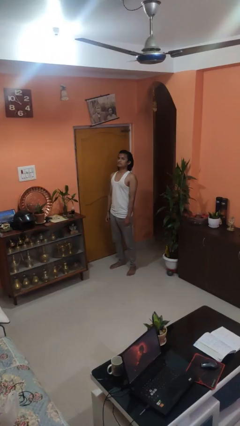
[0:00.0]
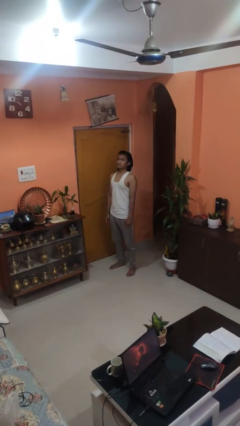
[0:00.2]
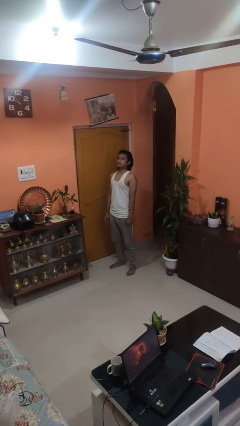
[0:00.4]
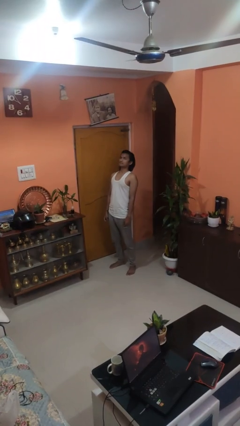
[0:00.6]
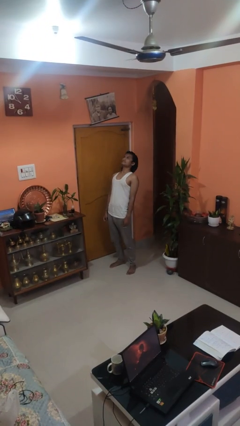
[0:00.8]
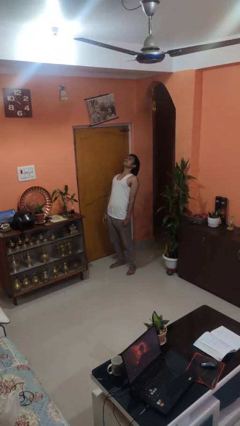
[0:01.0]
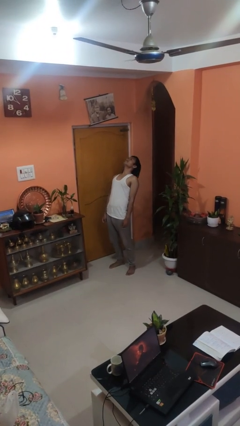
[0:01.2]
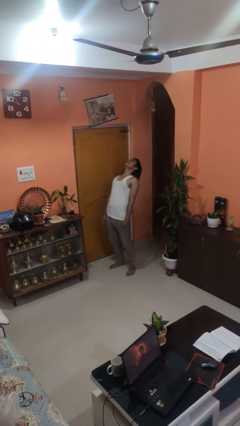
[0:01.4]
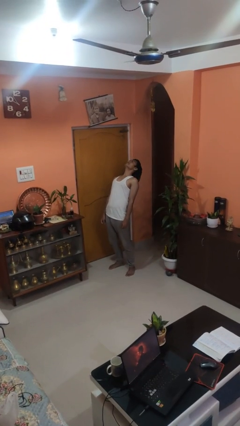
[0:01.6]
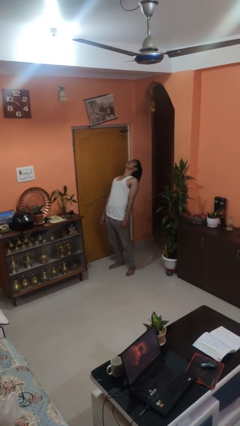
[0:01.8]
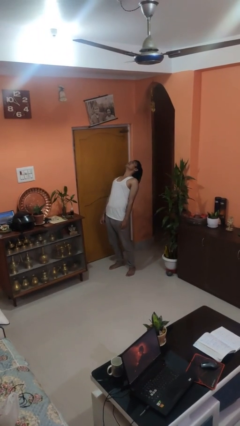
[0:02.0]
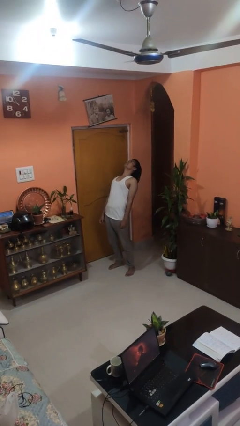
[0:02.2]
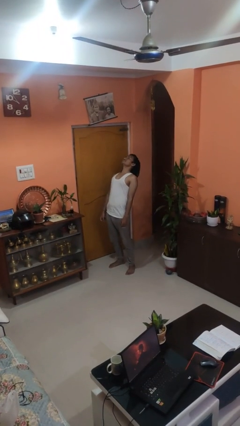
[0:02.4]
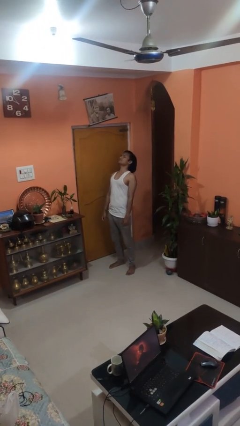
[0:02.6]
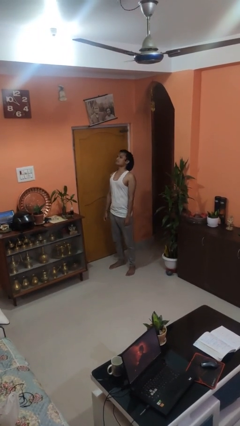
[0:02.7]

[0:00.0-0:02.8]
person stretches back

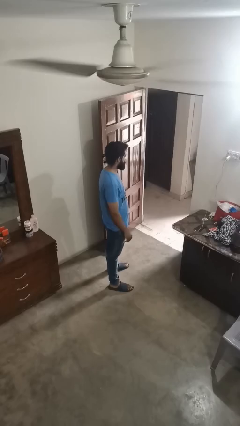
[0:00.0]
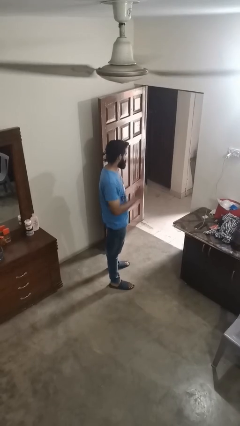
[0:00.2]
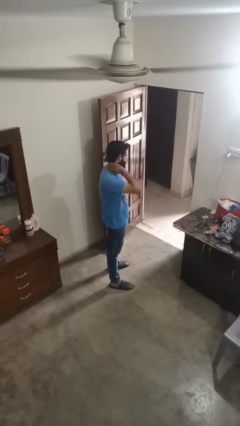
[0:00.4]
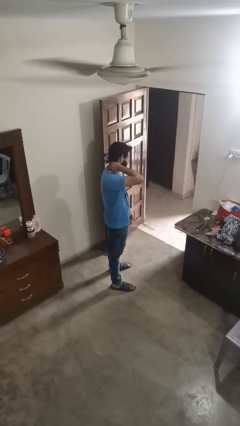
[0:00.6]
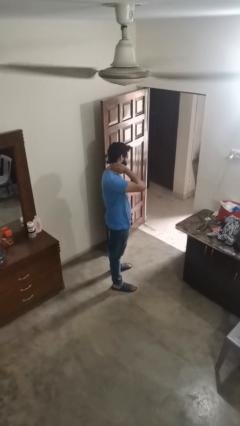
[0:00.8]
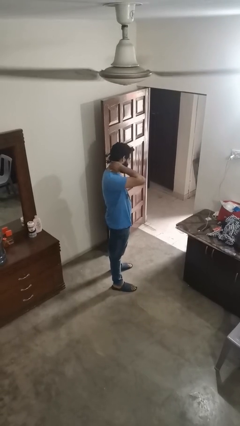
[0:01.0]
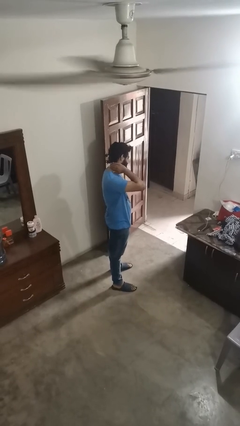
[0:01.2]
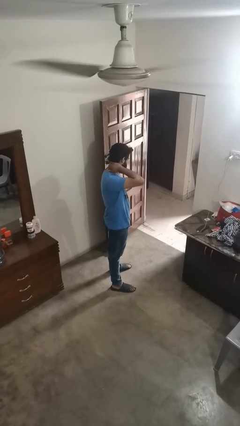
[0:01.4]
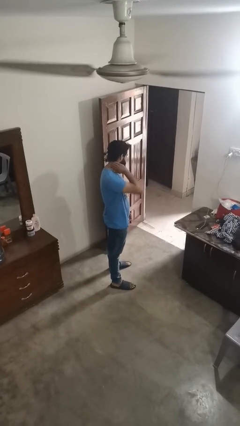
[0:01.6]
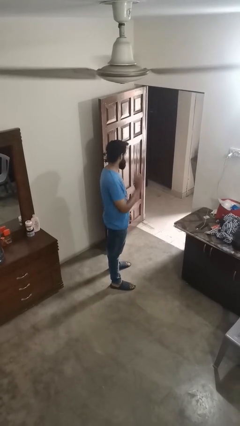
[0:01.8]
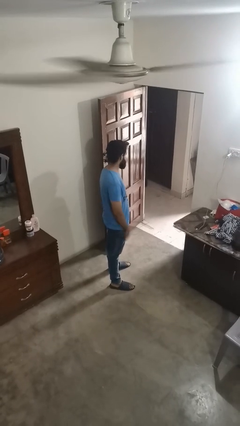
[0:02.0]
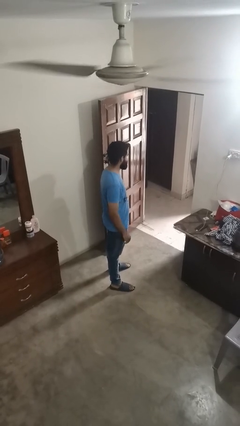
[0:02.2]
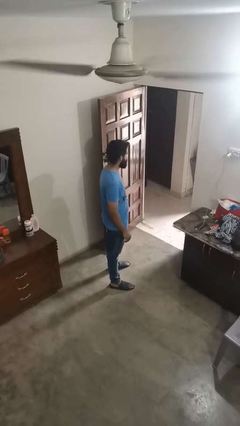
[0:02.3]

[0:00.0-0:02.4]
person rubs neck

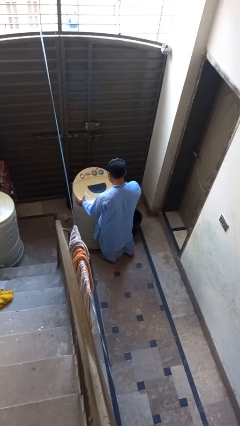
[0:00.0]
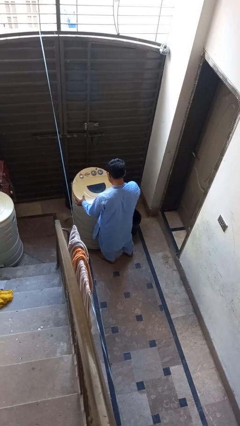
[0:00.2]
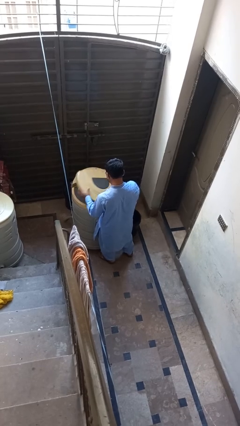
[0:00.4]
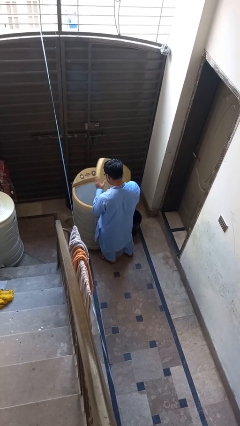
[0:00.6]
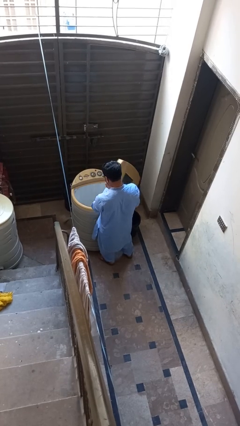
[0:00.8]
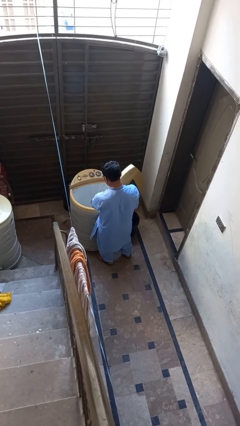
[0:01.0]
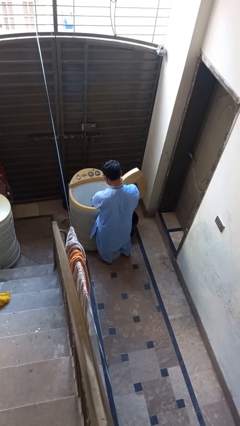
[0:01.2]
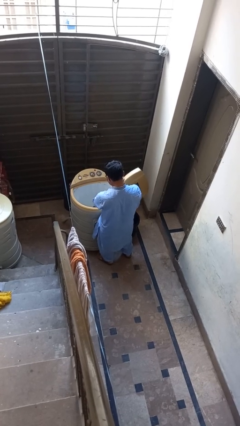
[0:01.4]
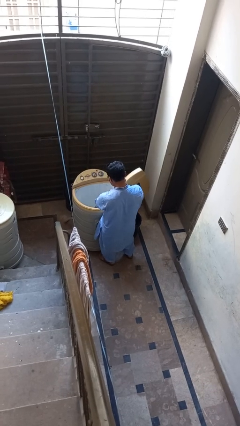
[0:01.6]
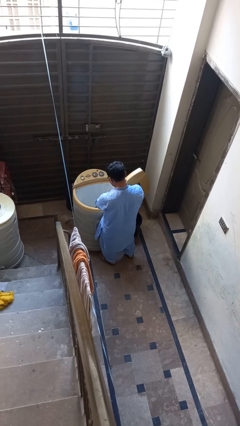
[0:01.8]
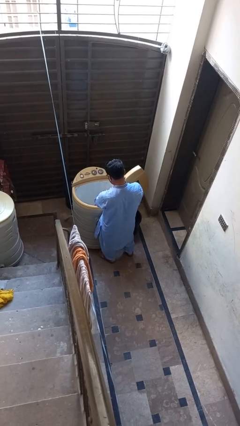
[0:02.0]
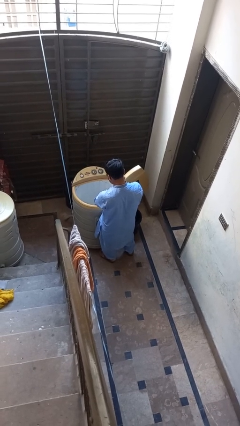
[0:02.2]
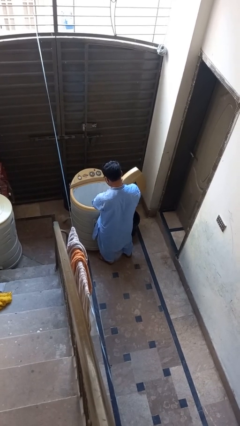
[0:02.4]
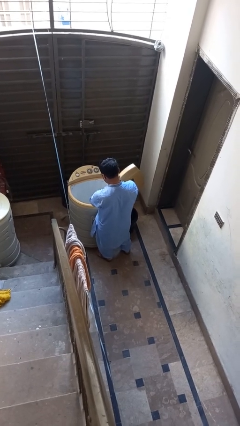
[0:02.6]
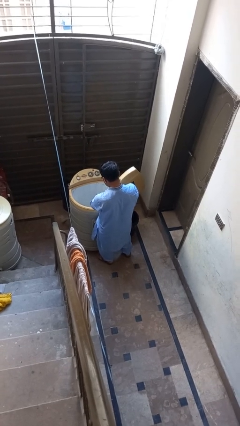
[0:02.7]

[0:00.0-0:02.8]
person opens clothes washer

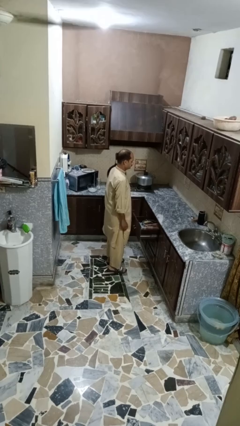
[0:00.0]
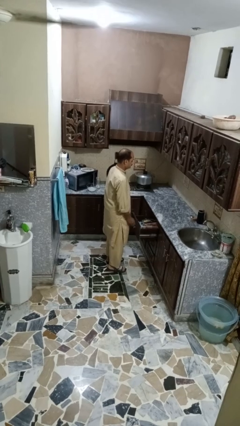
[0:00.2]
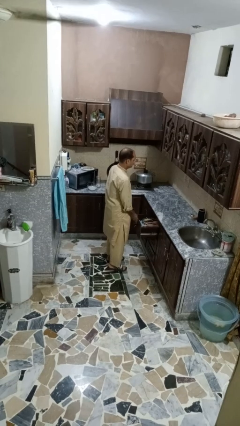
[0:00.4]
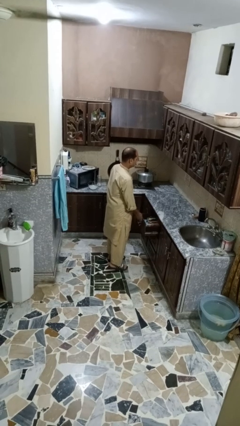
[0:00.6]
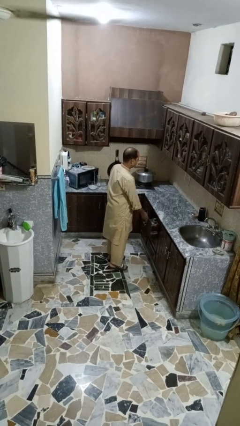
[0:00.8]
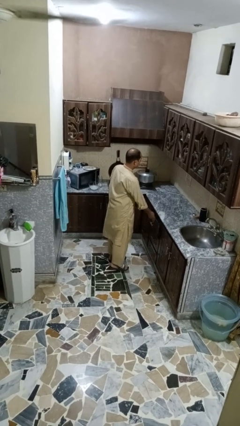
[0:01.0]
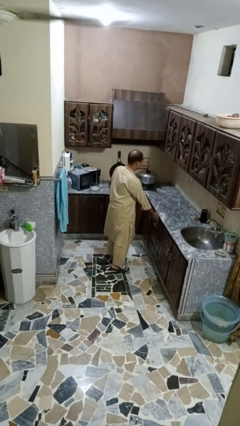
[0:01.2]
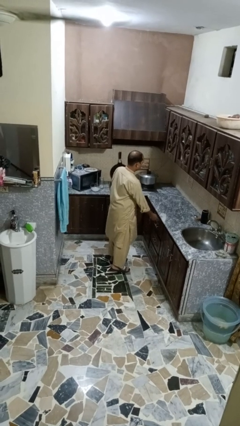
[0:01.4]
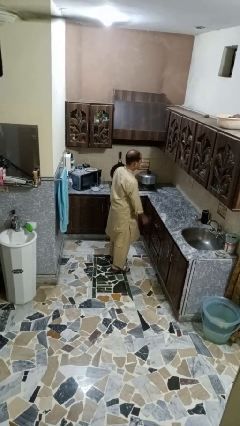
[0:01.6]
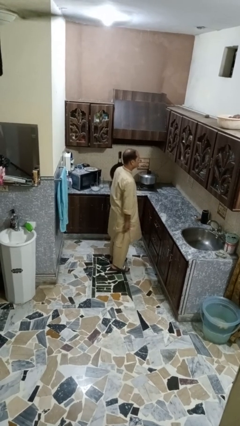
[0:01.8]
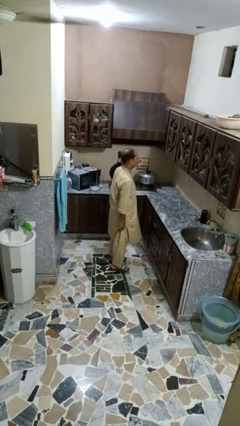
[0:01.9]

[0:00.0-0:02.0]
person closes kitchen drawer

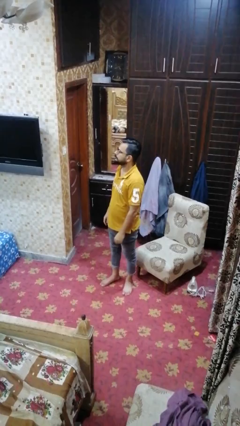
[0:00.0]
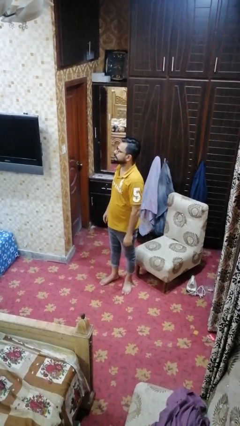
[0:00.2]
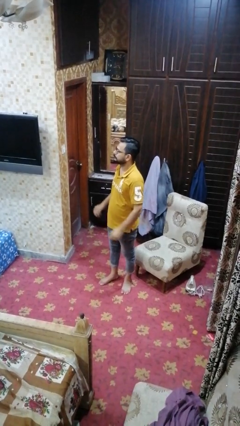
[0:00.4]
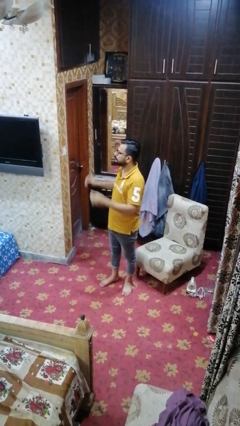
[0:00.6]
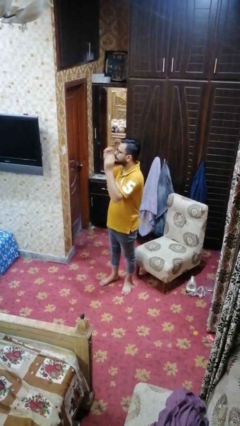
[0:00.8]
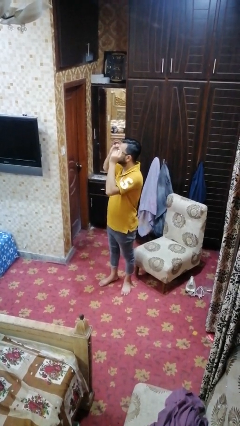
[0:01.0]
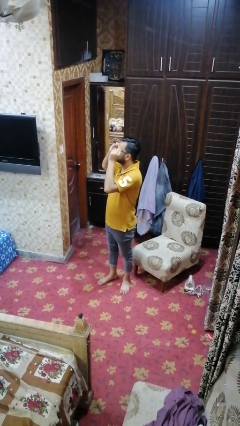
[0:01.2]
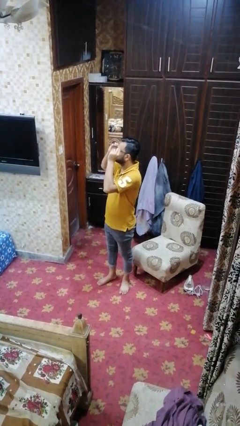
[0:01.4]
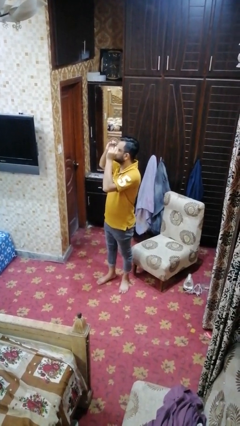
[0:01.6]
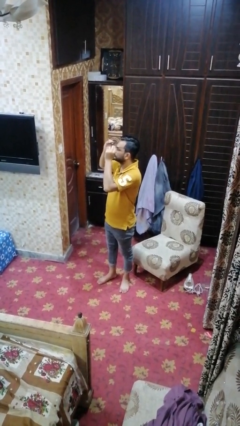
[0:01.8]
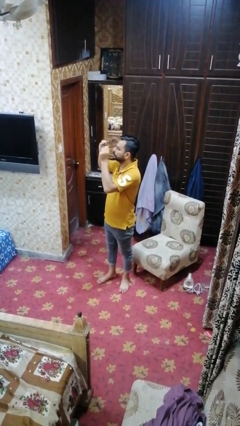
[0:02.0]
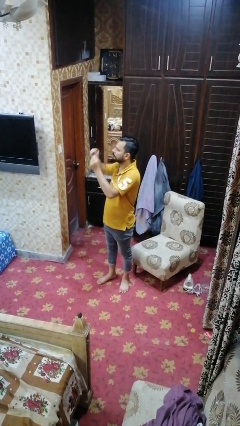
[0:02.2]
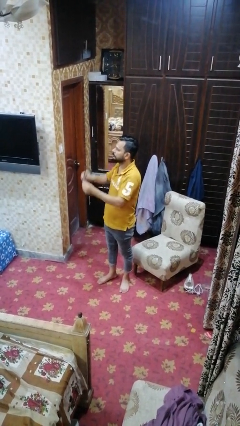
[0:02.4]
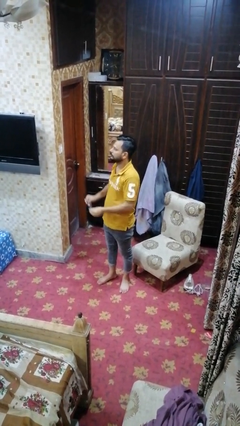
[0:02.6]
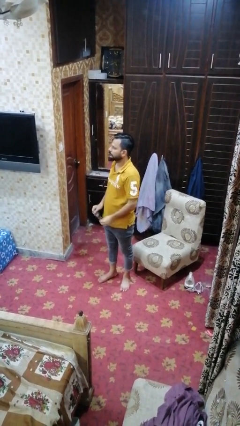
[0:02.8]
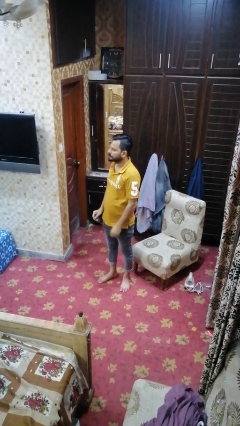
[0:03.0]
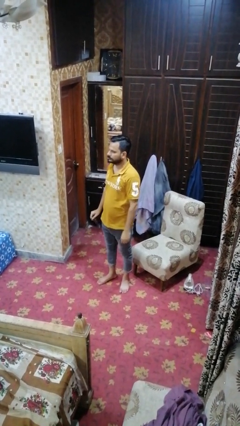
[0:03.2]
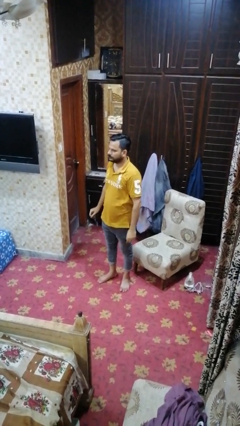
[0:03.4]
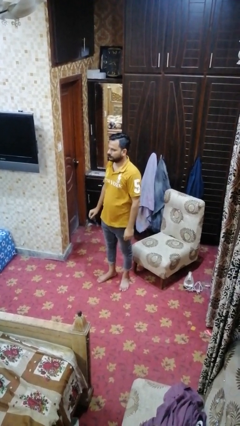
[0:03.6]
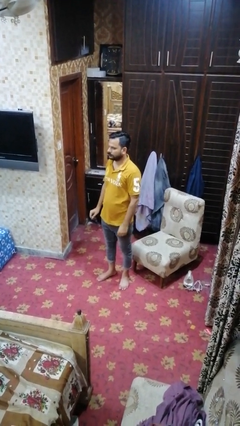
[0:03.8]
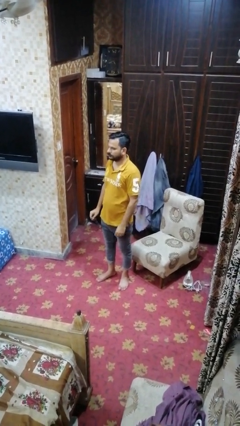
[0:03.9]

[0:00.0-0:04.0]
person takes off glasses

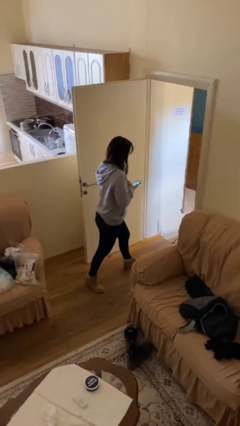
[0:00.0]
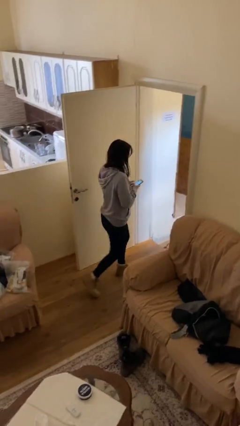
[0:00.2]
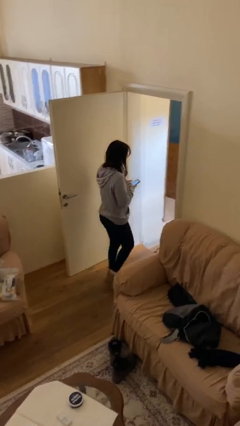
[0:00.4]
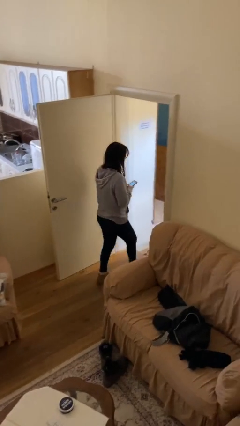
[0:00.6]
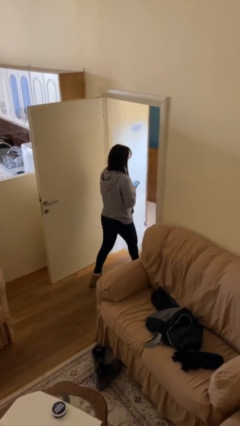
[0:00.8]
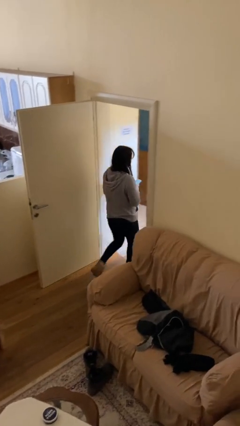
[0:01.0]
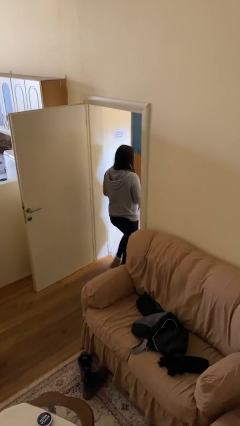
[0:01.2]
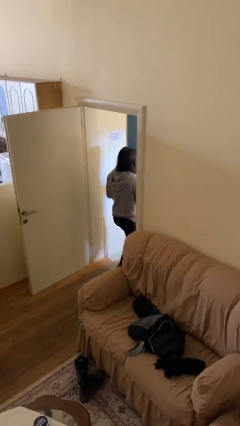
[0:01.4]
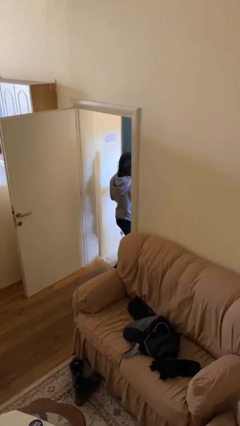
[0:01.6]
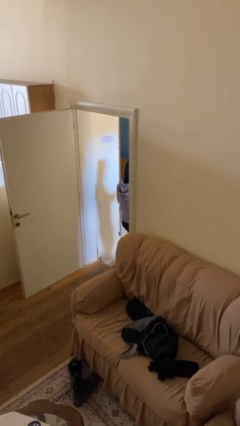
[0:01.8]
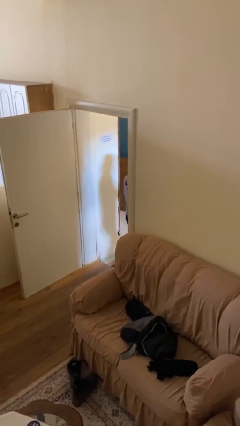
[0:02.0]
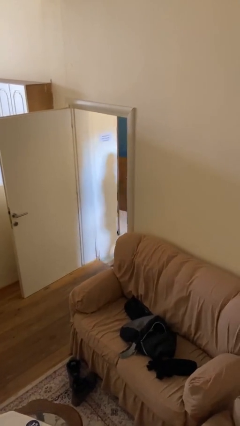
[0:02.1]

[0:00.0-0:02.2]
person exits scene through structure

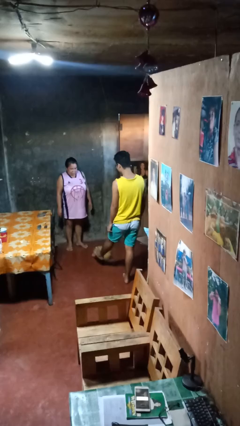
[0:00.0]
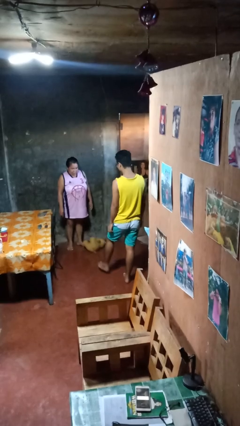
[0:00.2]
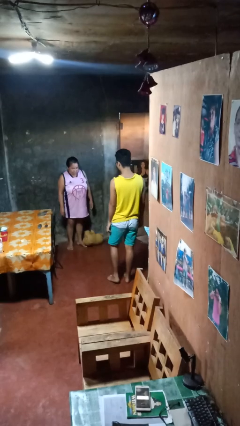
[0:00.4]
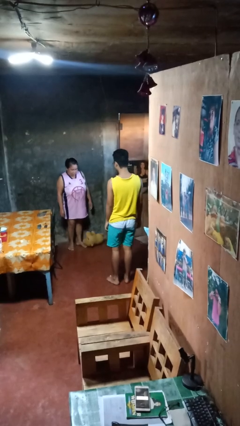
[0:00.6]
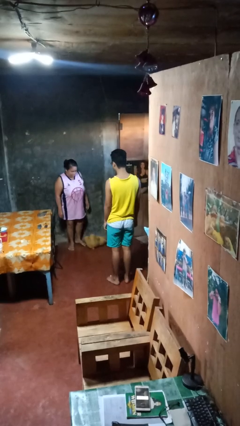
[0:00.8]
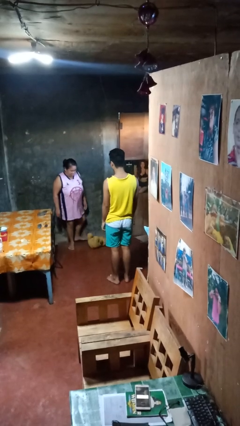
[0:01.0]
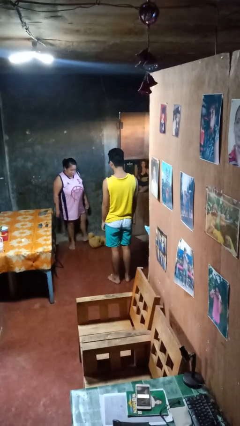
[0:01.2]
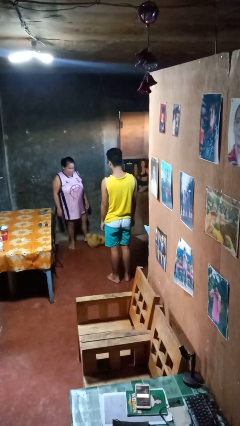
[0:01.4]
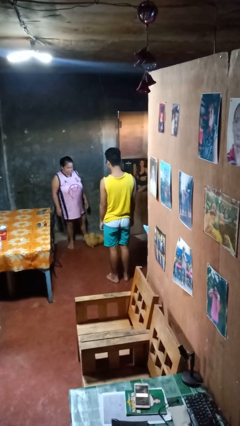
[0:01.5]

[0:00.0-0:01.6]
person kicks object to person
